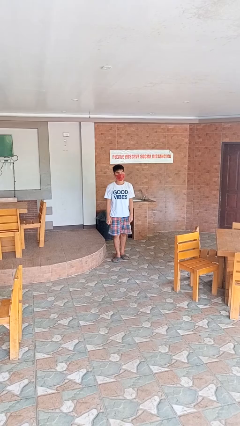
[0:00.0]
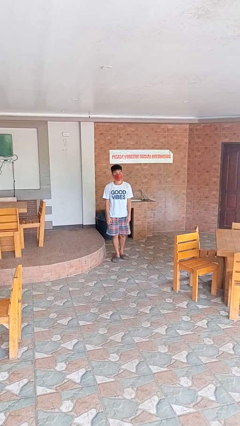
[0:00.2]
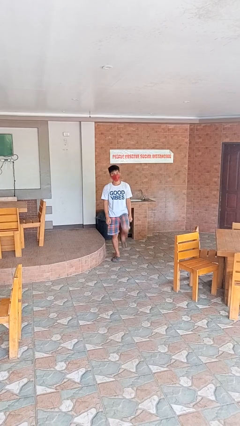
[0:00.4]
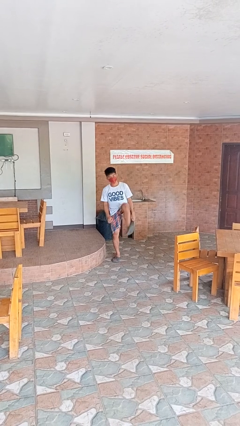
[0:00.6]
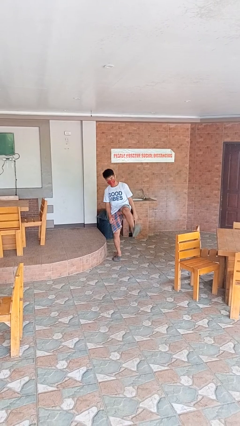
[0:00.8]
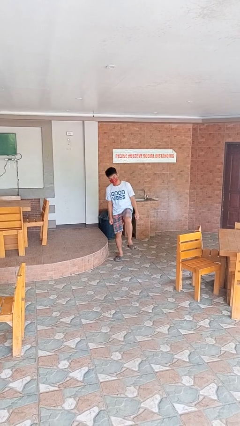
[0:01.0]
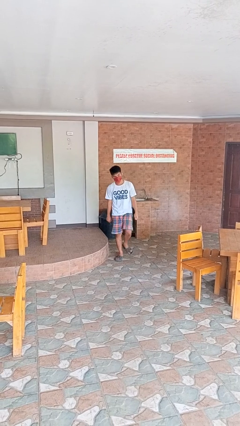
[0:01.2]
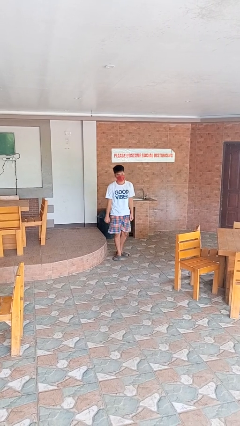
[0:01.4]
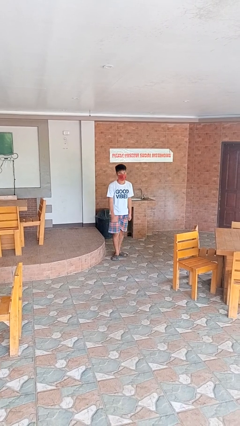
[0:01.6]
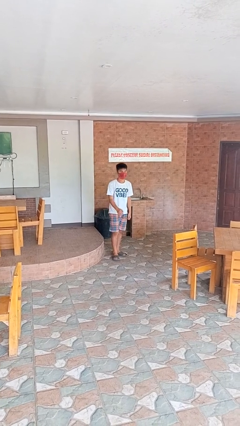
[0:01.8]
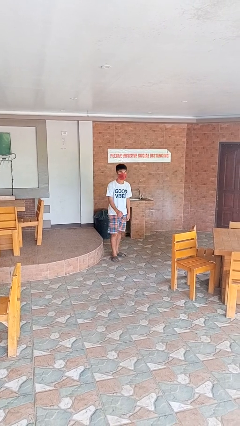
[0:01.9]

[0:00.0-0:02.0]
person karate kicks

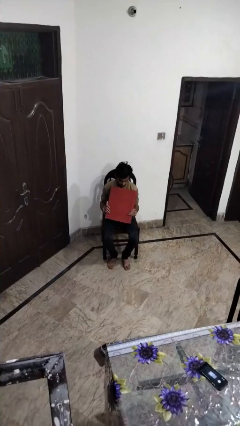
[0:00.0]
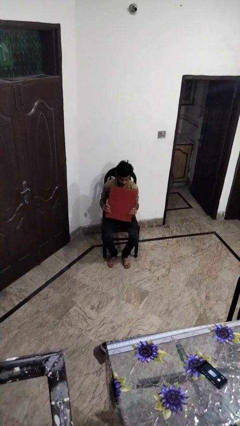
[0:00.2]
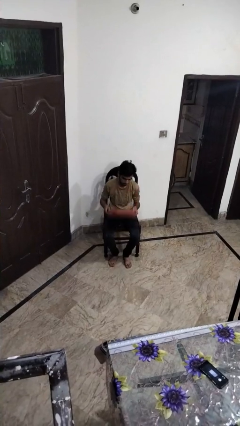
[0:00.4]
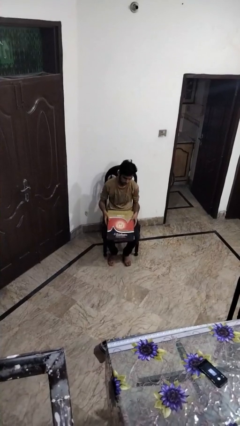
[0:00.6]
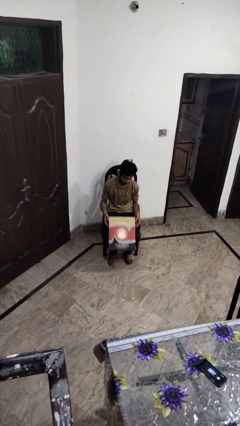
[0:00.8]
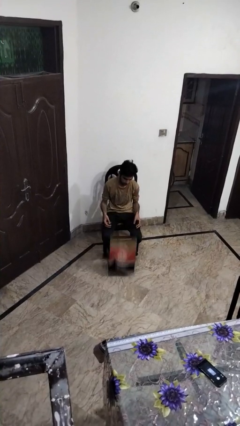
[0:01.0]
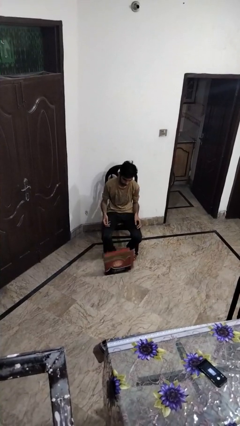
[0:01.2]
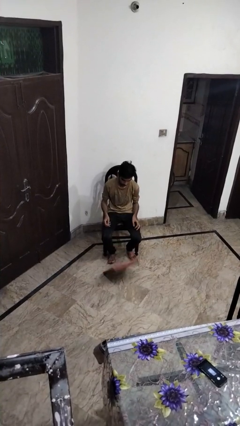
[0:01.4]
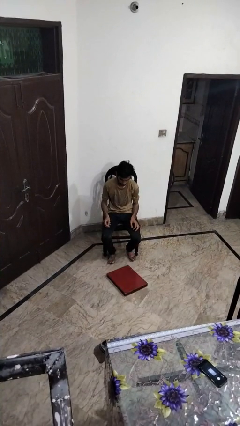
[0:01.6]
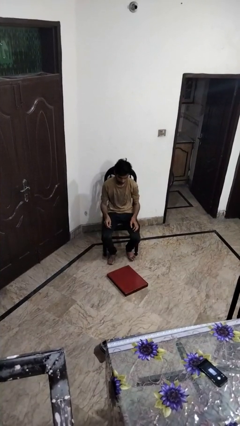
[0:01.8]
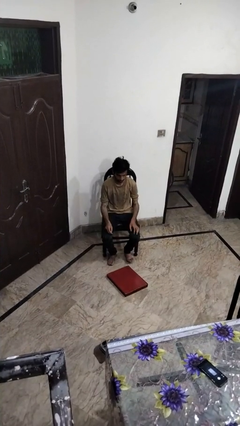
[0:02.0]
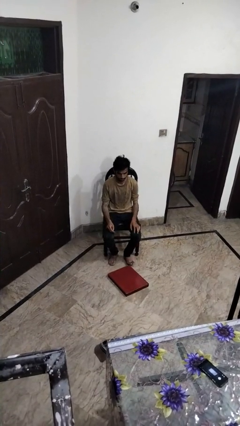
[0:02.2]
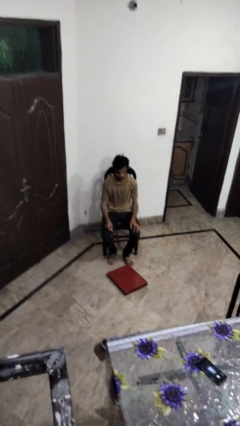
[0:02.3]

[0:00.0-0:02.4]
person drops object

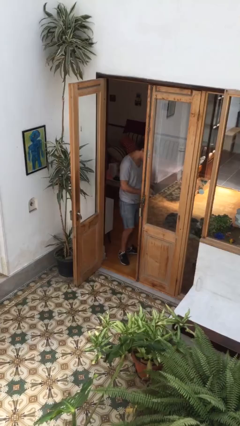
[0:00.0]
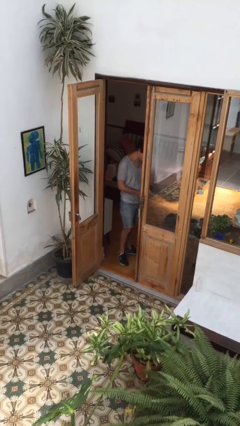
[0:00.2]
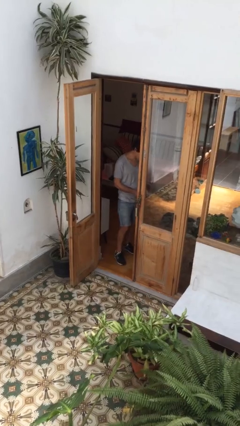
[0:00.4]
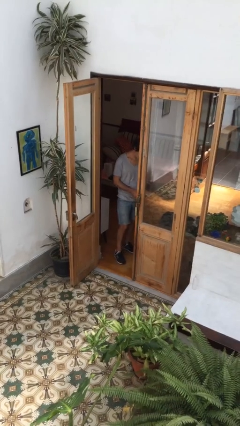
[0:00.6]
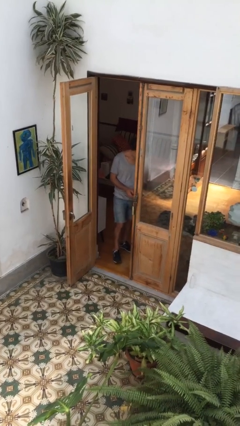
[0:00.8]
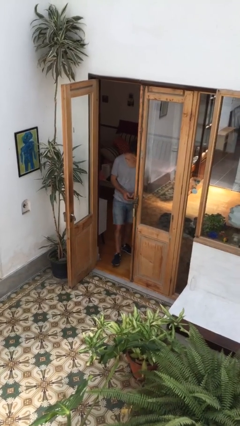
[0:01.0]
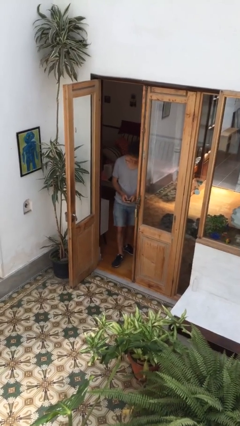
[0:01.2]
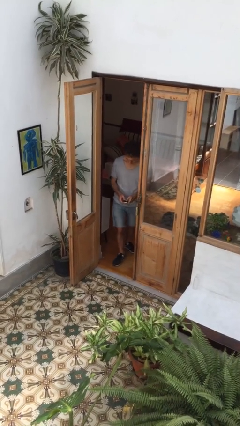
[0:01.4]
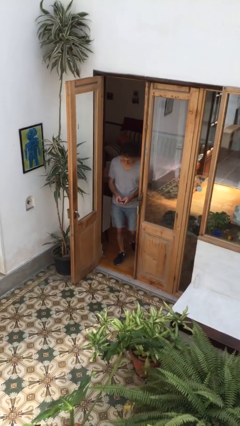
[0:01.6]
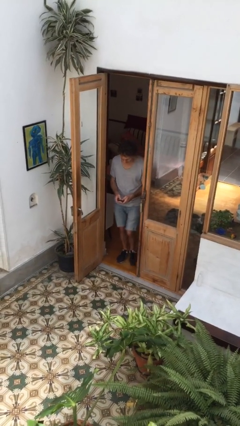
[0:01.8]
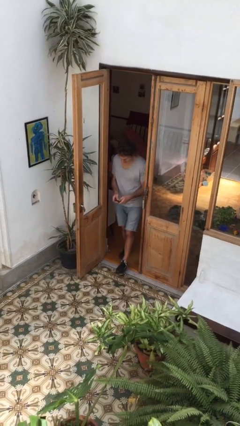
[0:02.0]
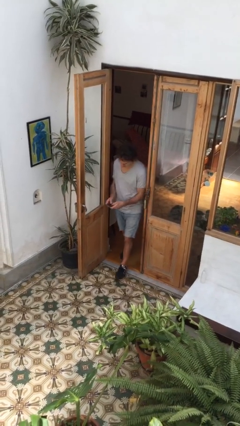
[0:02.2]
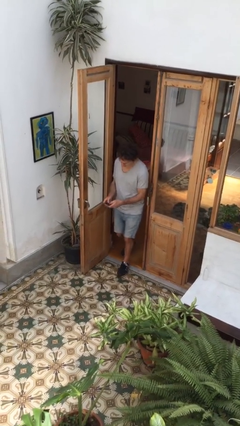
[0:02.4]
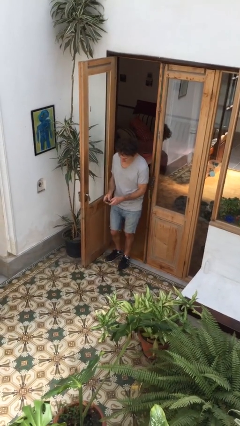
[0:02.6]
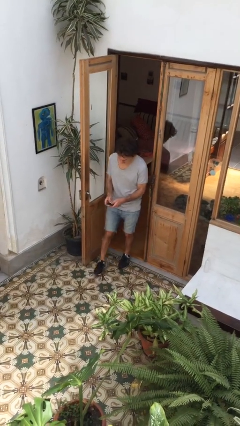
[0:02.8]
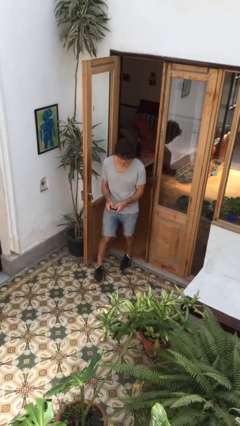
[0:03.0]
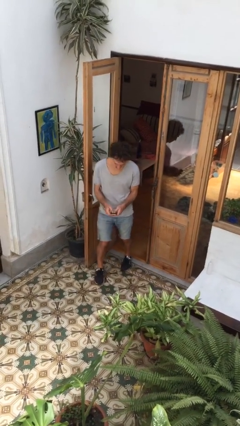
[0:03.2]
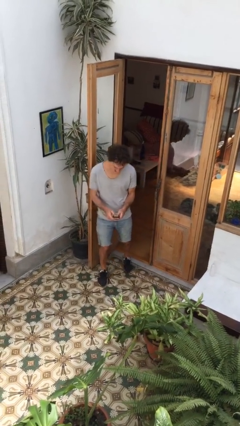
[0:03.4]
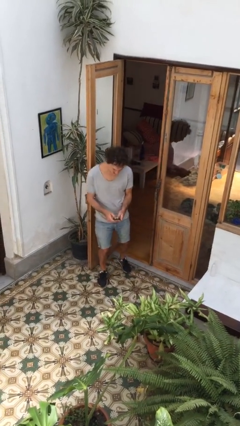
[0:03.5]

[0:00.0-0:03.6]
person enters scene through structure

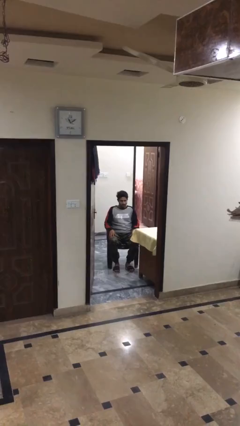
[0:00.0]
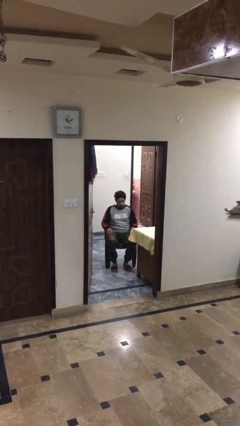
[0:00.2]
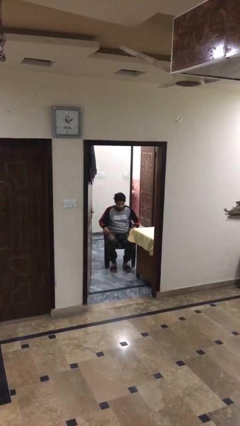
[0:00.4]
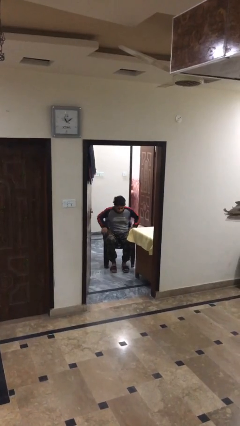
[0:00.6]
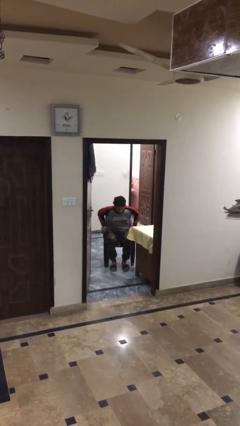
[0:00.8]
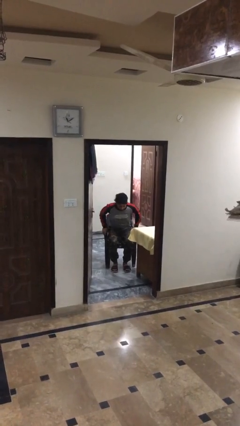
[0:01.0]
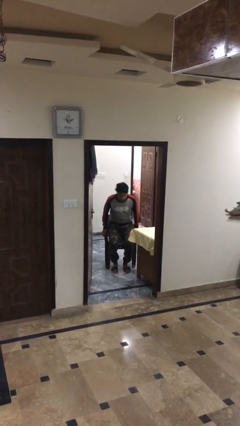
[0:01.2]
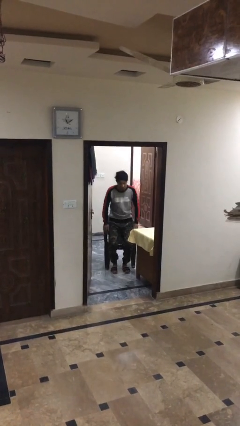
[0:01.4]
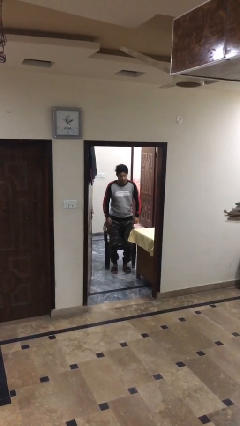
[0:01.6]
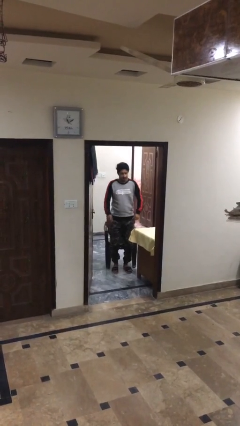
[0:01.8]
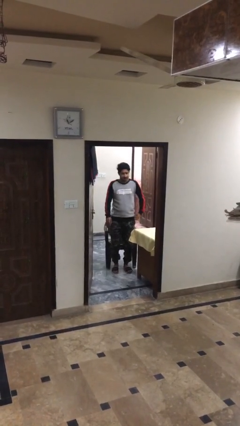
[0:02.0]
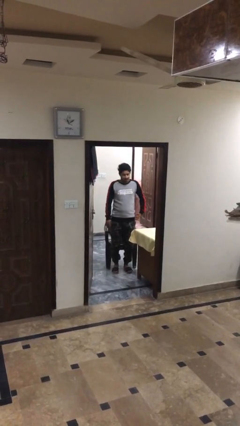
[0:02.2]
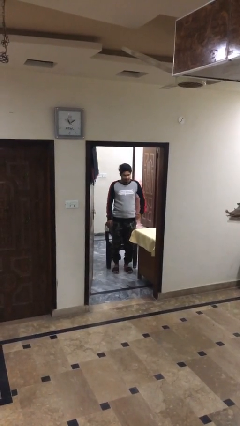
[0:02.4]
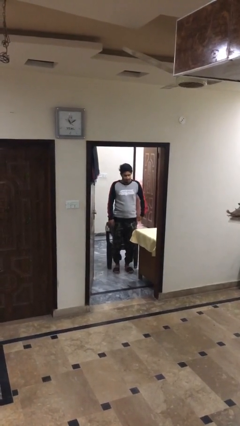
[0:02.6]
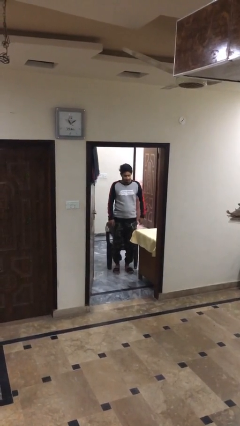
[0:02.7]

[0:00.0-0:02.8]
person stands up

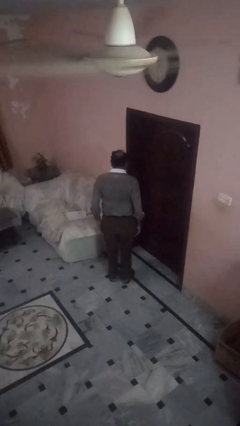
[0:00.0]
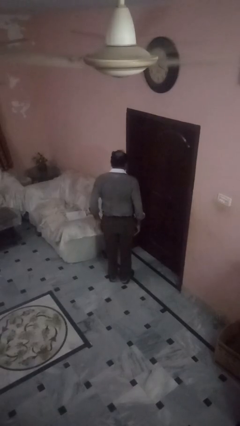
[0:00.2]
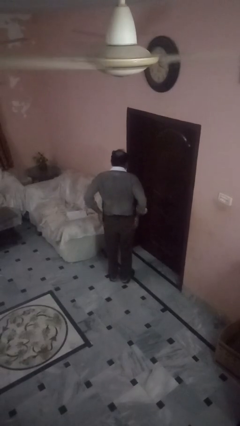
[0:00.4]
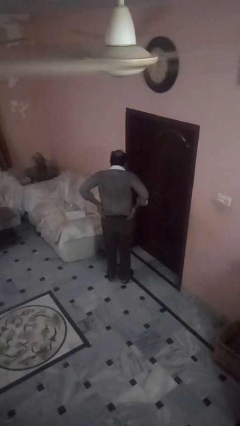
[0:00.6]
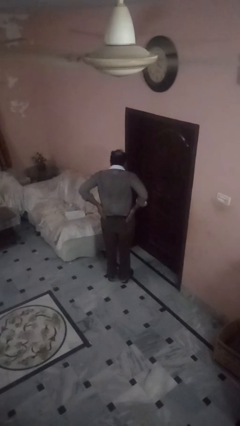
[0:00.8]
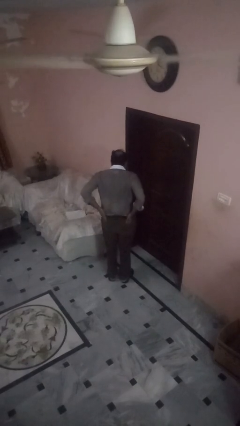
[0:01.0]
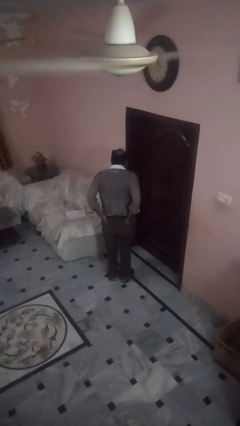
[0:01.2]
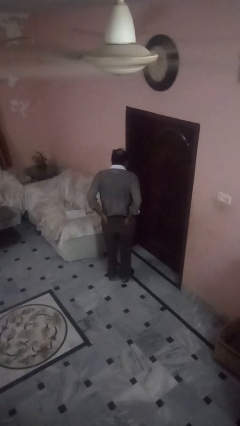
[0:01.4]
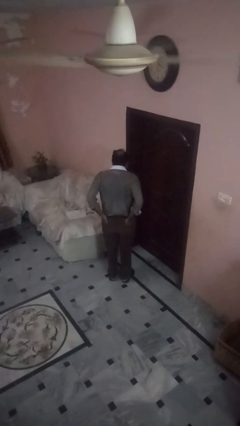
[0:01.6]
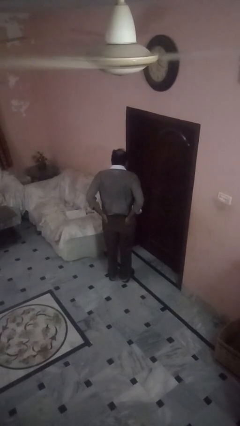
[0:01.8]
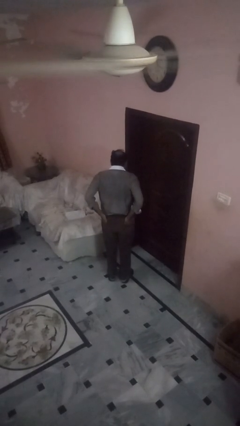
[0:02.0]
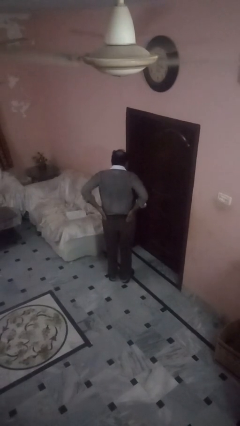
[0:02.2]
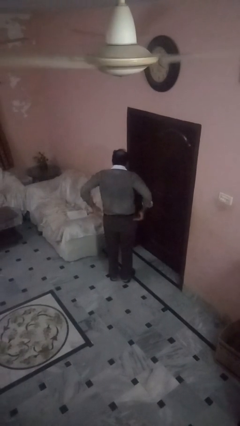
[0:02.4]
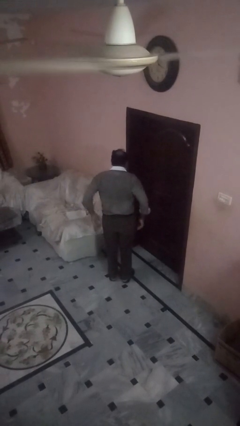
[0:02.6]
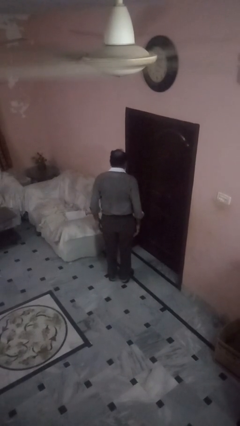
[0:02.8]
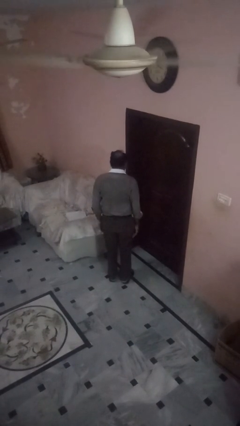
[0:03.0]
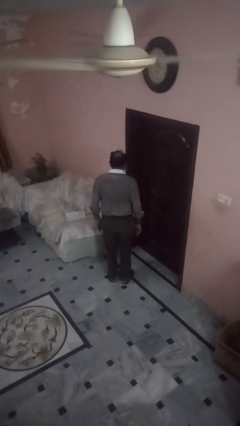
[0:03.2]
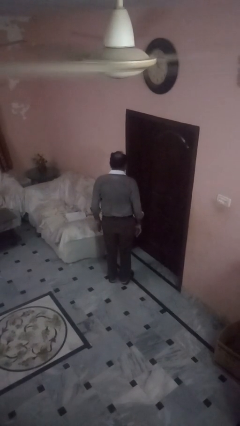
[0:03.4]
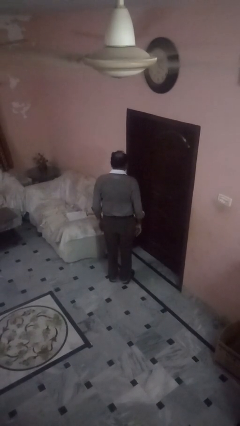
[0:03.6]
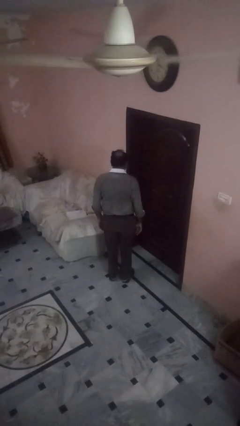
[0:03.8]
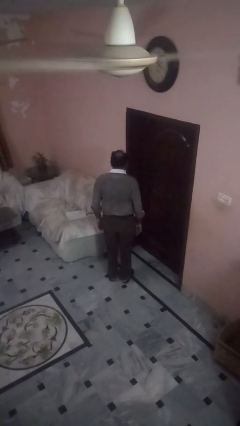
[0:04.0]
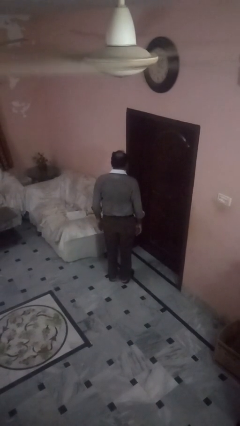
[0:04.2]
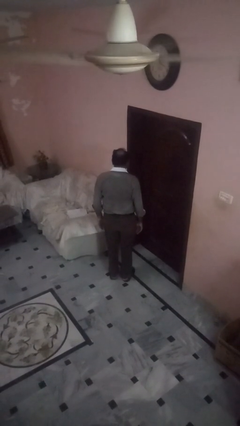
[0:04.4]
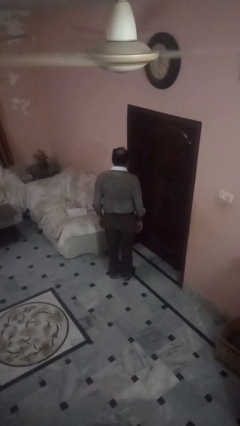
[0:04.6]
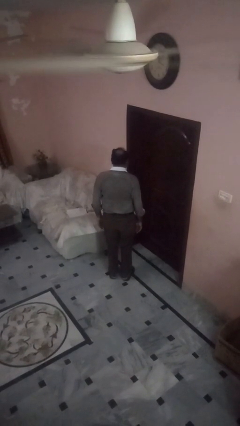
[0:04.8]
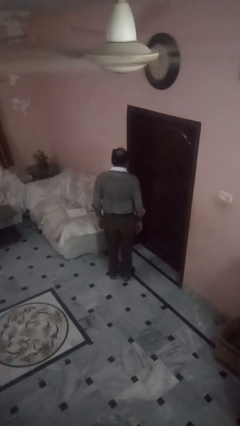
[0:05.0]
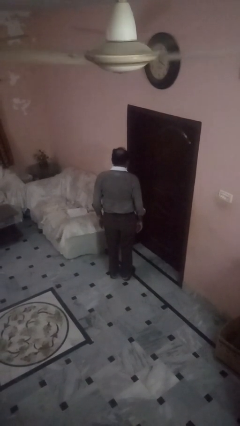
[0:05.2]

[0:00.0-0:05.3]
person puts hands in back pockets

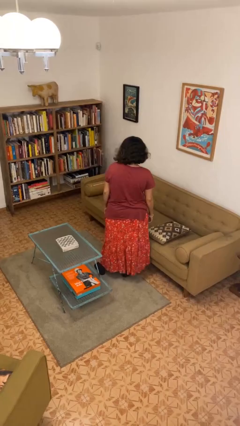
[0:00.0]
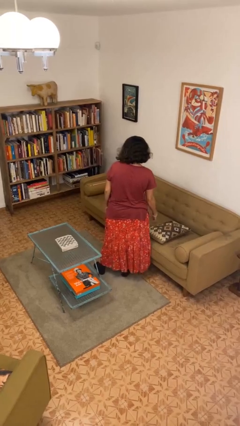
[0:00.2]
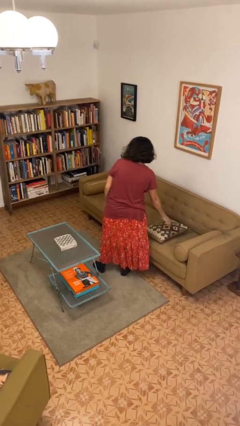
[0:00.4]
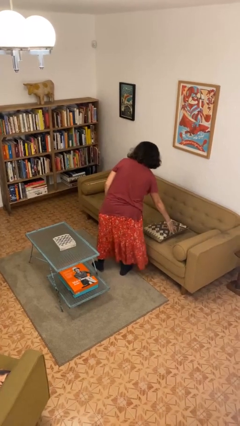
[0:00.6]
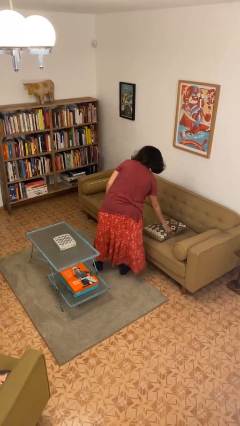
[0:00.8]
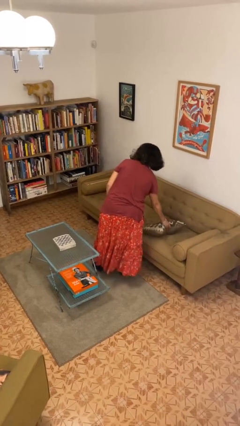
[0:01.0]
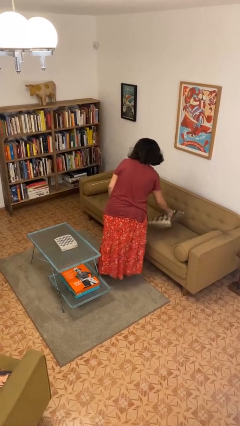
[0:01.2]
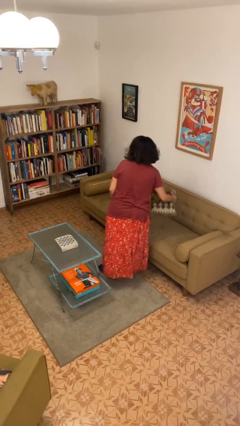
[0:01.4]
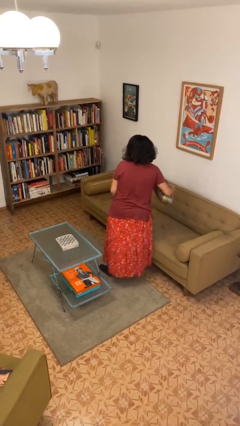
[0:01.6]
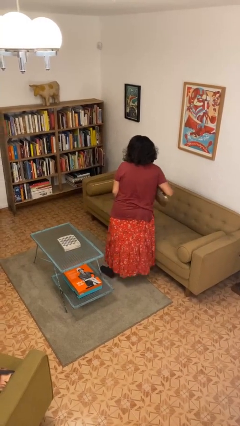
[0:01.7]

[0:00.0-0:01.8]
person picks up object from couch
